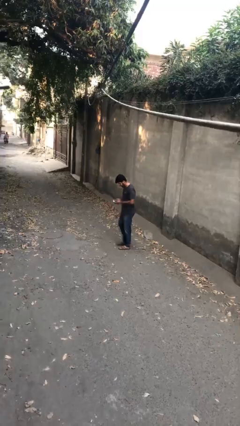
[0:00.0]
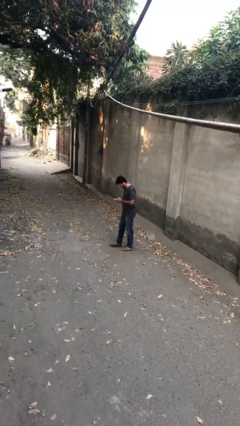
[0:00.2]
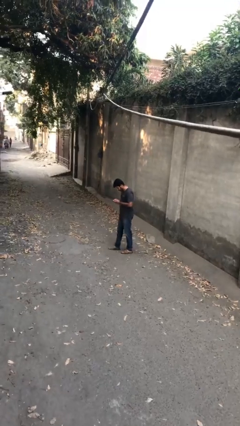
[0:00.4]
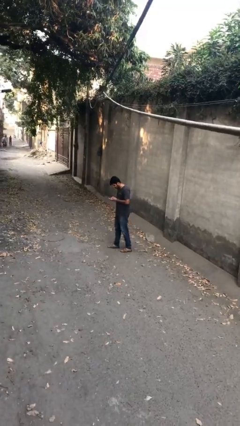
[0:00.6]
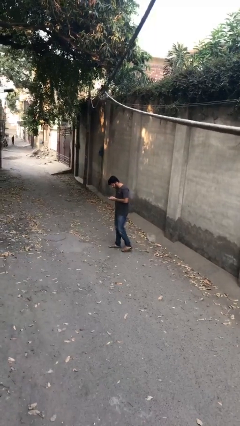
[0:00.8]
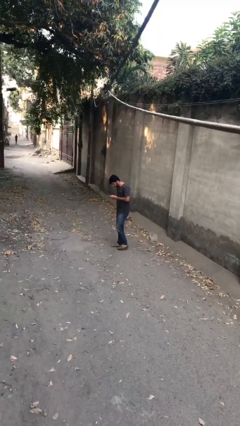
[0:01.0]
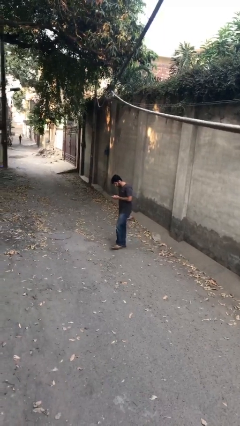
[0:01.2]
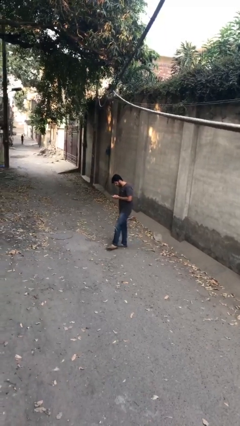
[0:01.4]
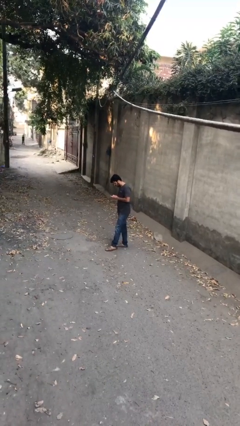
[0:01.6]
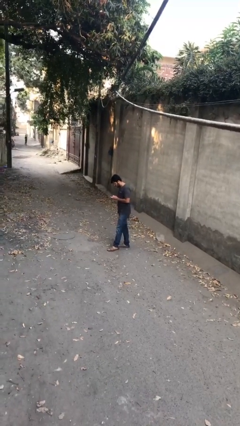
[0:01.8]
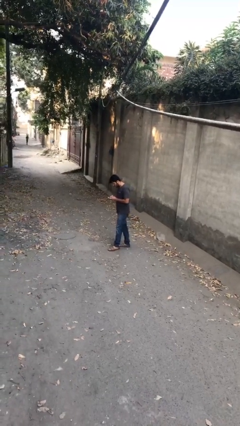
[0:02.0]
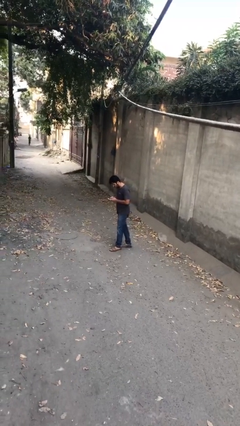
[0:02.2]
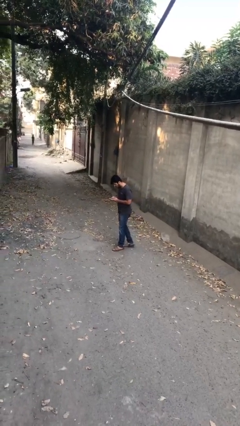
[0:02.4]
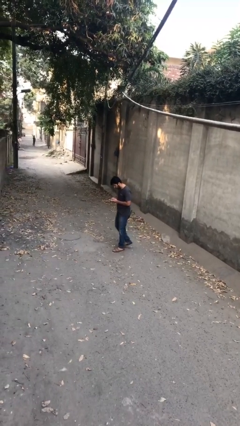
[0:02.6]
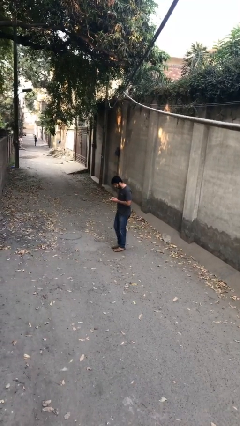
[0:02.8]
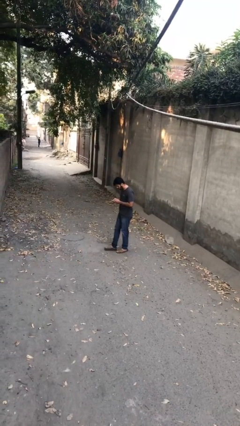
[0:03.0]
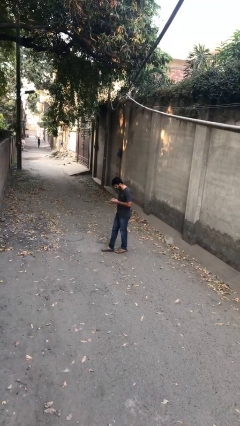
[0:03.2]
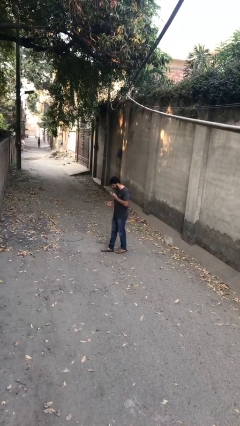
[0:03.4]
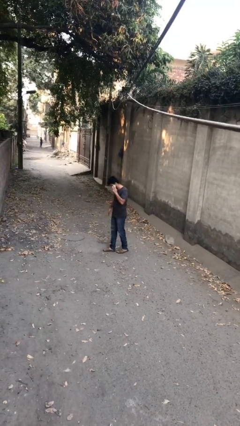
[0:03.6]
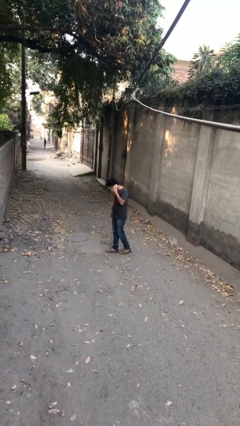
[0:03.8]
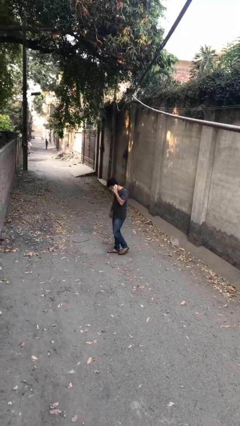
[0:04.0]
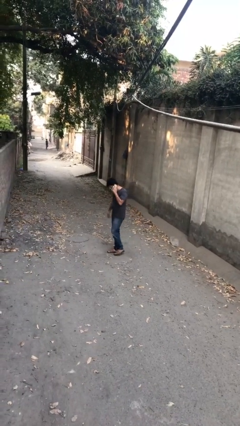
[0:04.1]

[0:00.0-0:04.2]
person texts on phone

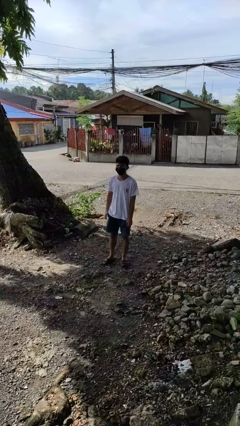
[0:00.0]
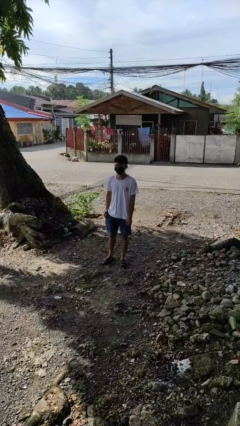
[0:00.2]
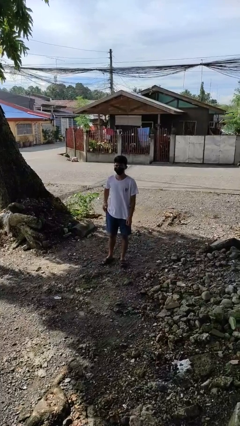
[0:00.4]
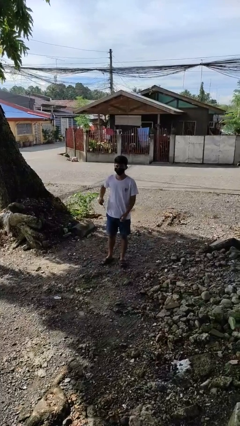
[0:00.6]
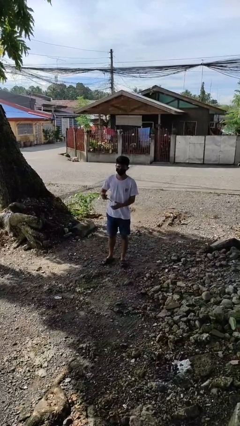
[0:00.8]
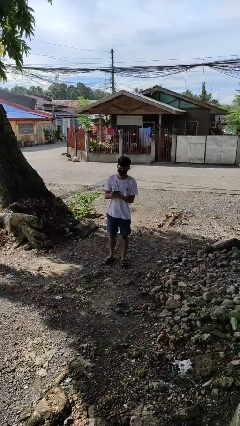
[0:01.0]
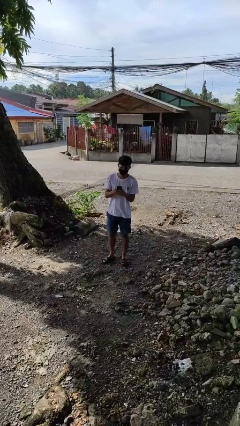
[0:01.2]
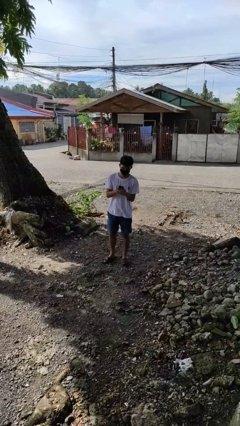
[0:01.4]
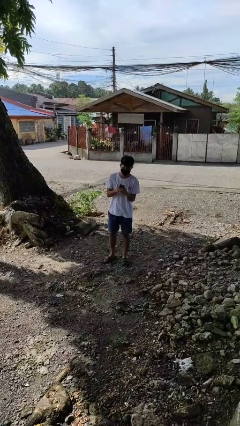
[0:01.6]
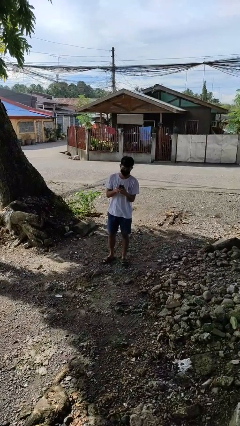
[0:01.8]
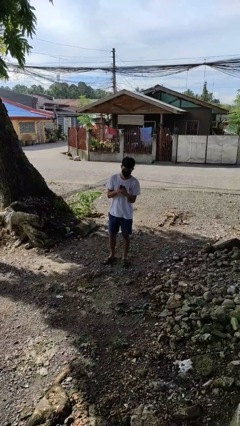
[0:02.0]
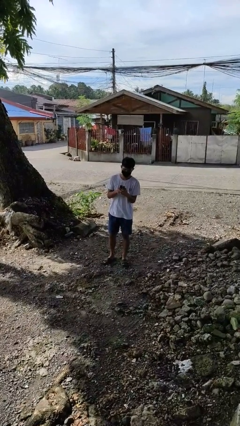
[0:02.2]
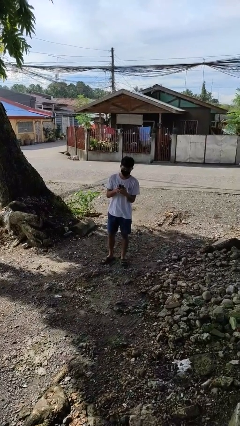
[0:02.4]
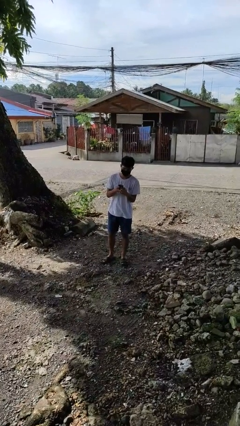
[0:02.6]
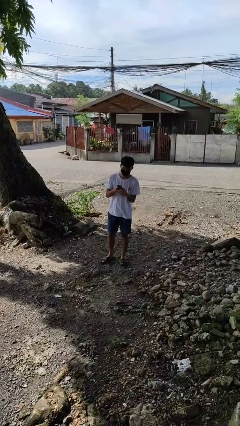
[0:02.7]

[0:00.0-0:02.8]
person takes phone from pocket

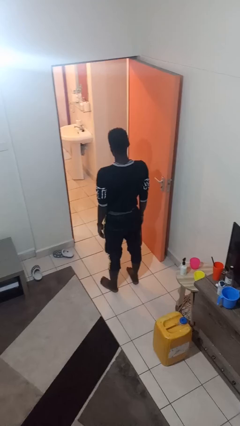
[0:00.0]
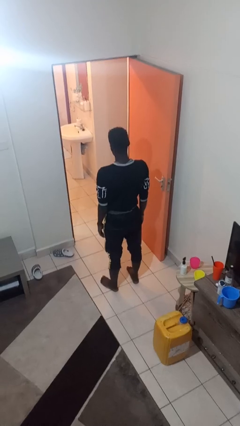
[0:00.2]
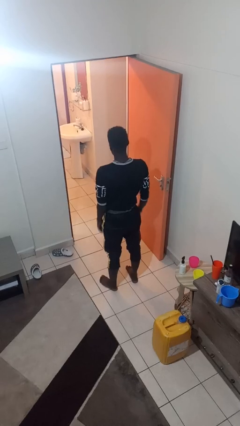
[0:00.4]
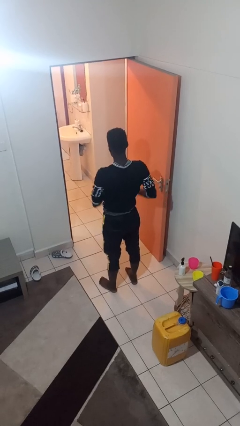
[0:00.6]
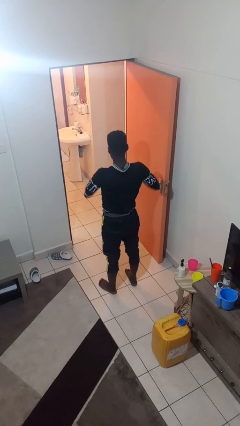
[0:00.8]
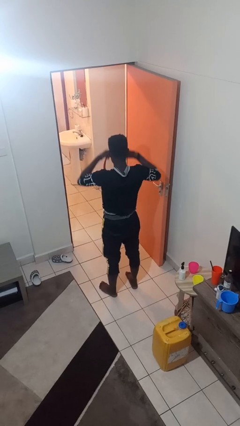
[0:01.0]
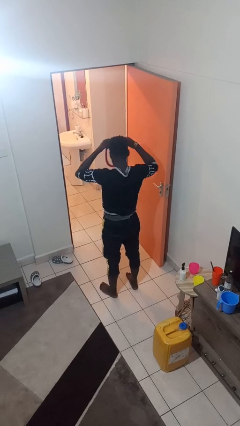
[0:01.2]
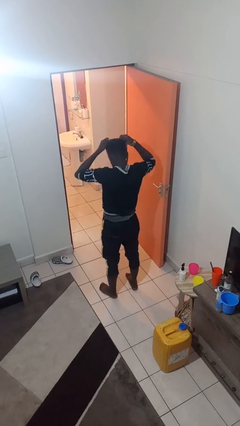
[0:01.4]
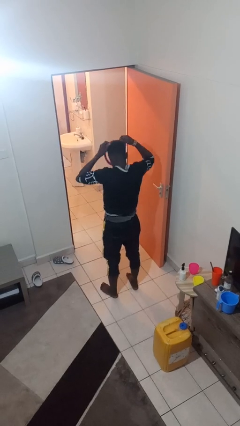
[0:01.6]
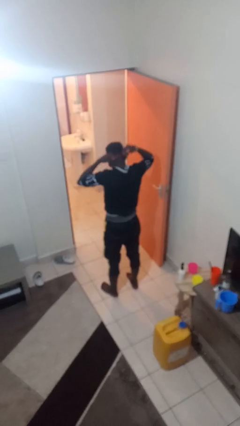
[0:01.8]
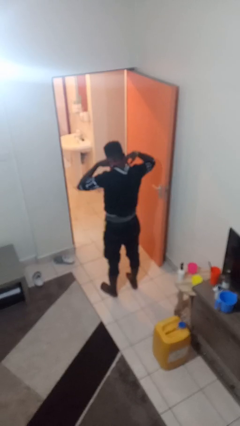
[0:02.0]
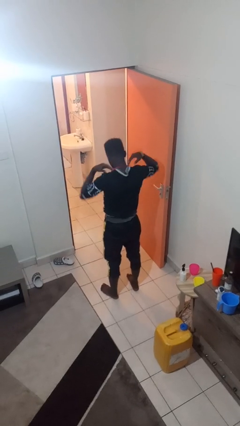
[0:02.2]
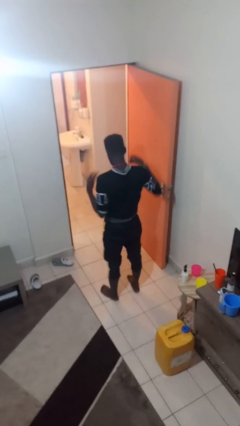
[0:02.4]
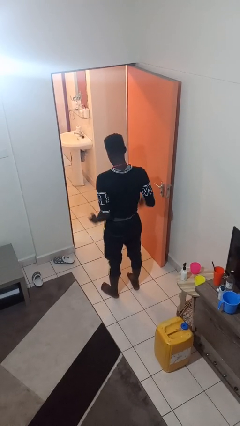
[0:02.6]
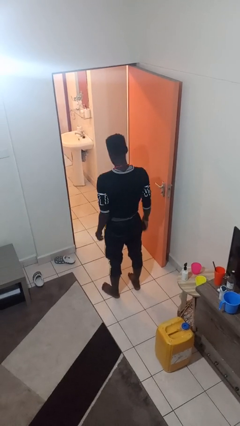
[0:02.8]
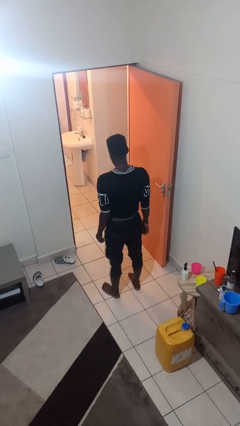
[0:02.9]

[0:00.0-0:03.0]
person puts on necklace

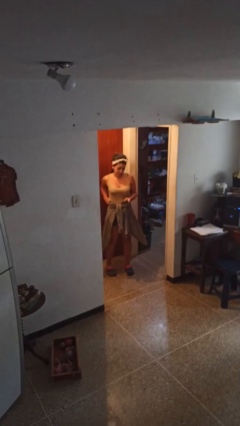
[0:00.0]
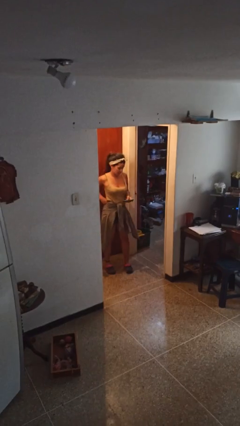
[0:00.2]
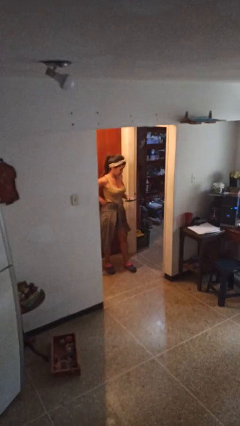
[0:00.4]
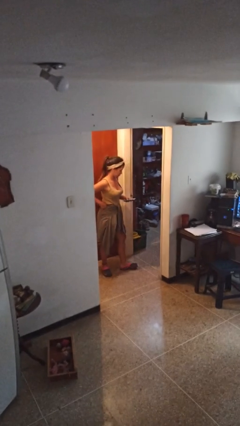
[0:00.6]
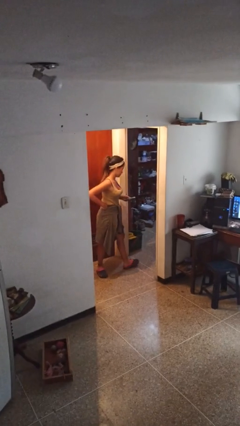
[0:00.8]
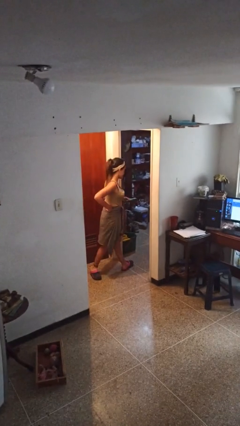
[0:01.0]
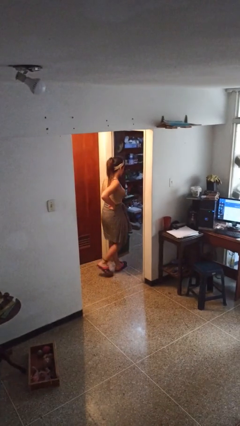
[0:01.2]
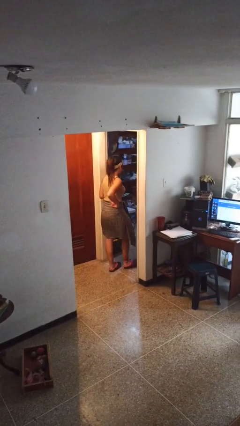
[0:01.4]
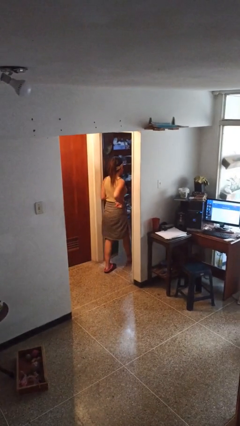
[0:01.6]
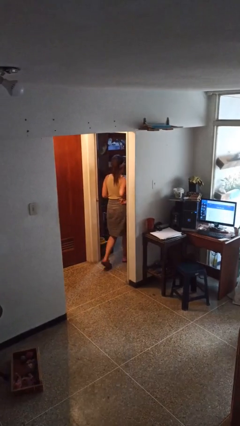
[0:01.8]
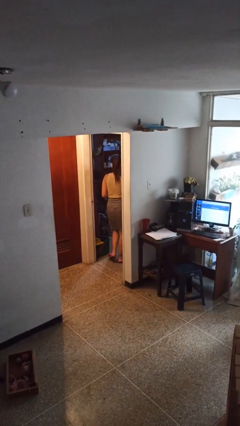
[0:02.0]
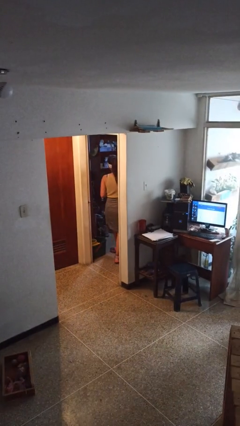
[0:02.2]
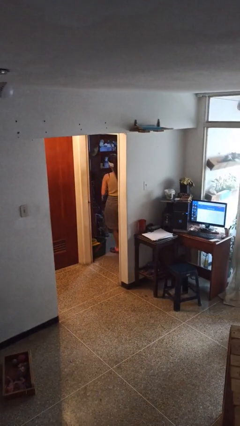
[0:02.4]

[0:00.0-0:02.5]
person exits scene through structure

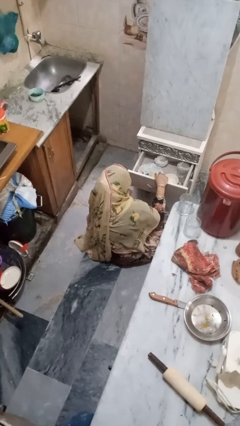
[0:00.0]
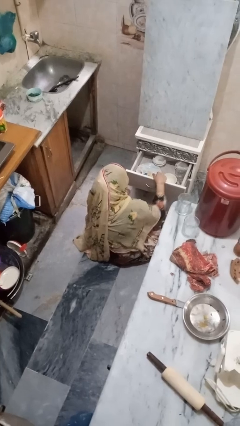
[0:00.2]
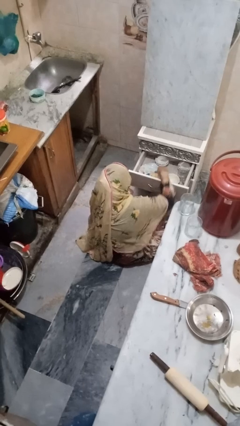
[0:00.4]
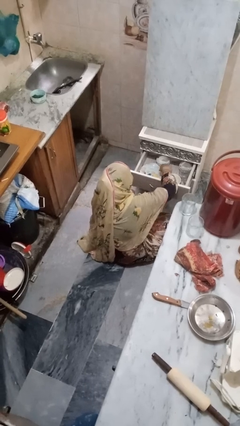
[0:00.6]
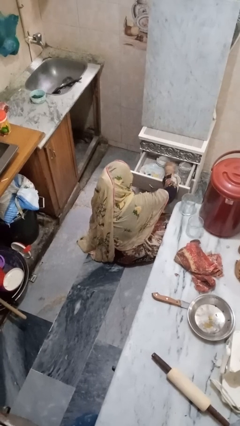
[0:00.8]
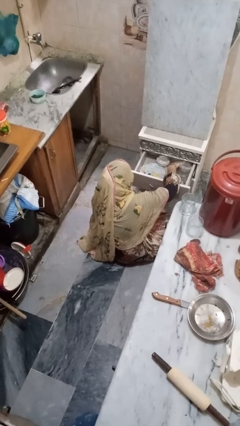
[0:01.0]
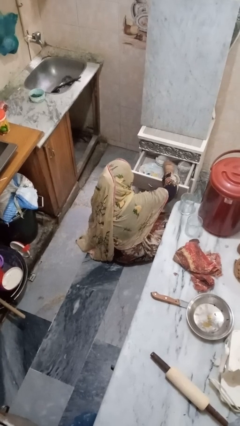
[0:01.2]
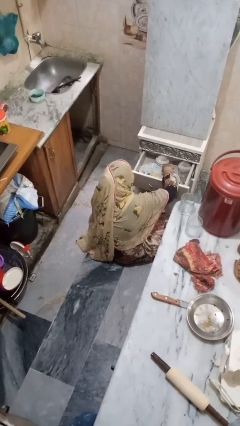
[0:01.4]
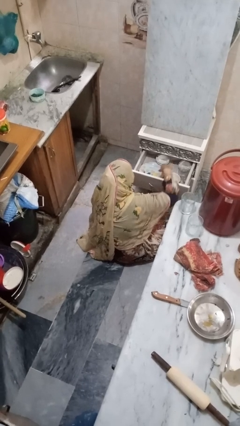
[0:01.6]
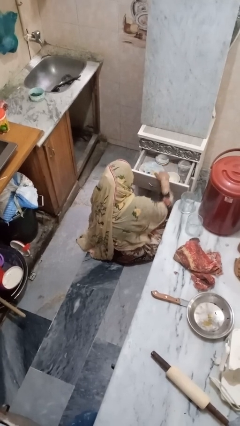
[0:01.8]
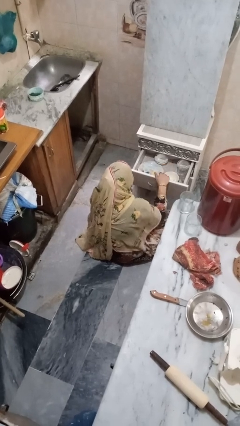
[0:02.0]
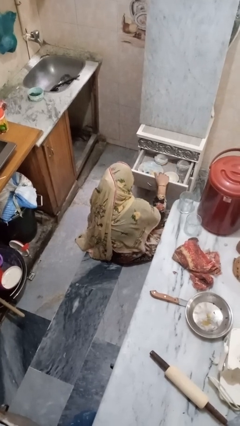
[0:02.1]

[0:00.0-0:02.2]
person searches in kitchen drawer

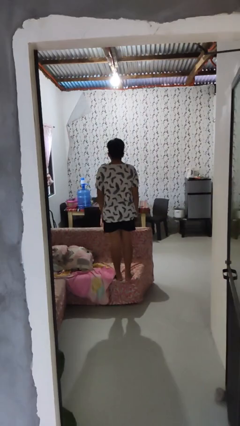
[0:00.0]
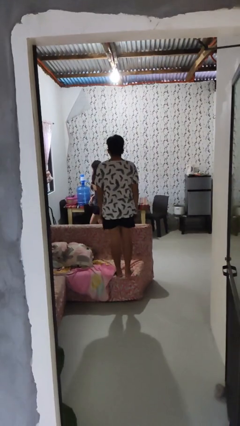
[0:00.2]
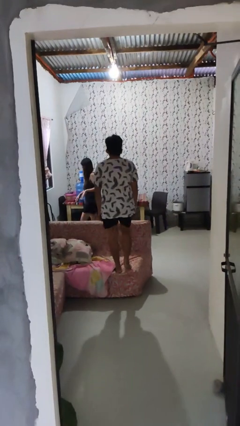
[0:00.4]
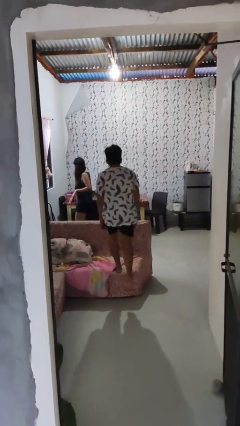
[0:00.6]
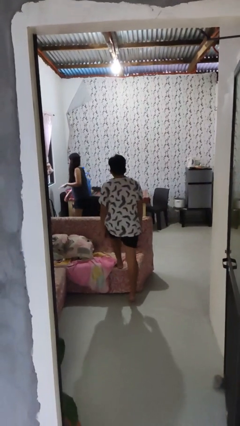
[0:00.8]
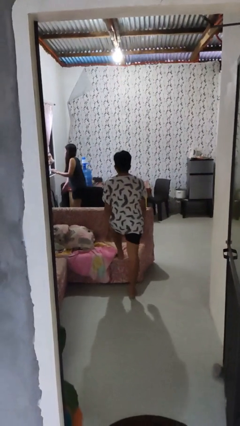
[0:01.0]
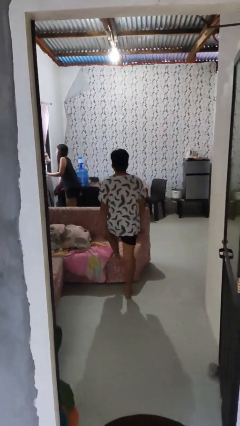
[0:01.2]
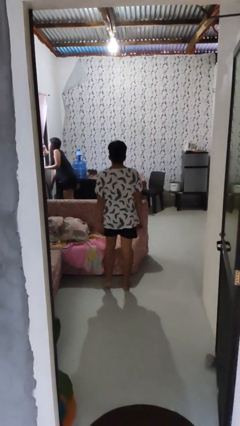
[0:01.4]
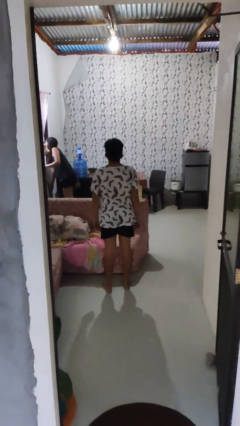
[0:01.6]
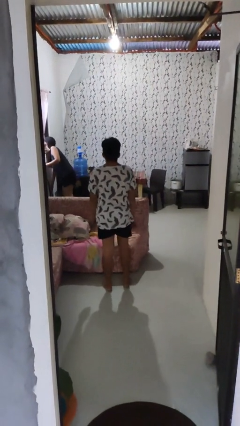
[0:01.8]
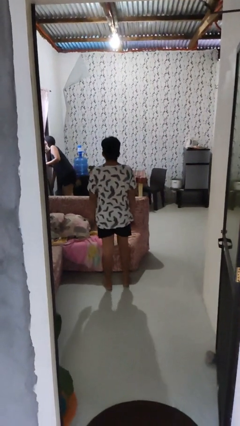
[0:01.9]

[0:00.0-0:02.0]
person climbs off couch

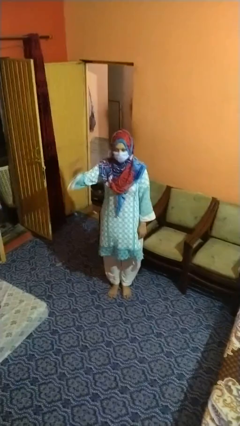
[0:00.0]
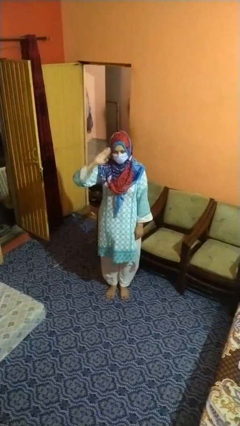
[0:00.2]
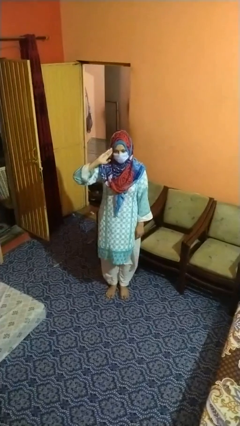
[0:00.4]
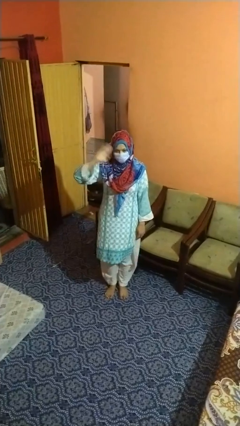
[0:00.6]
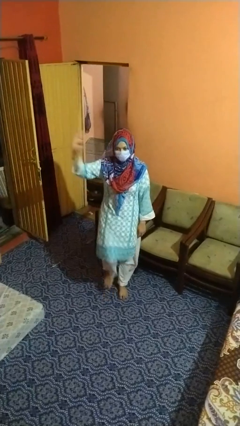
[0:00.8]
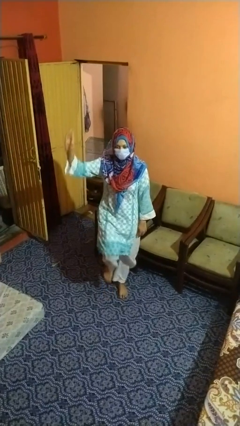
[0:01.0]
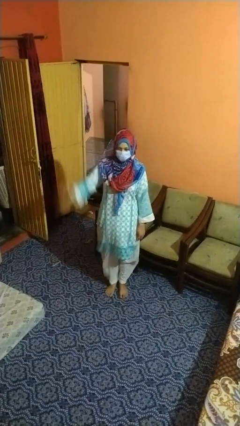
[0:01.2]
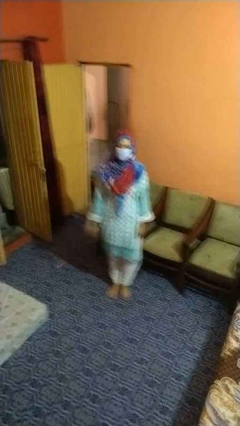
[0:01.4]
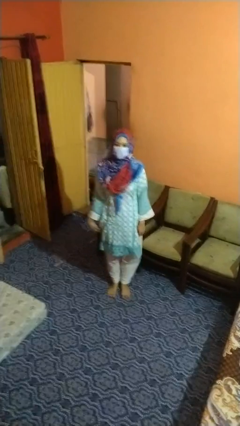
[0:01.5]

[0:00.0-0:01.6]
person salutes
